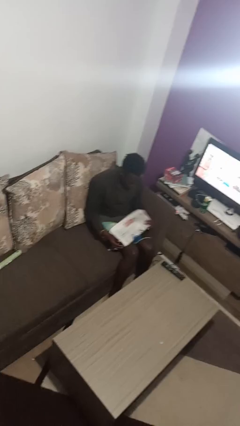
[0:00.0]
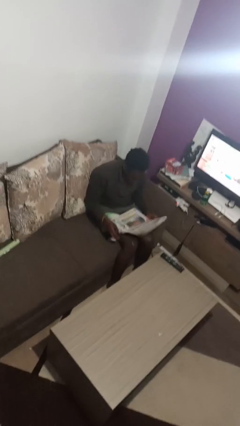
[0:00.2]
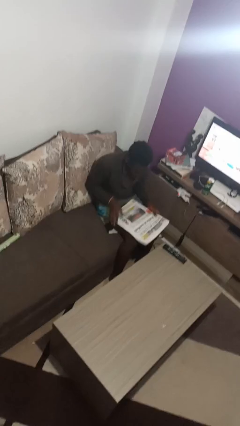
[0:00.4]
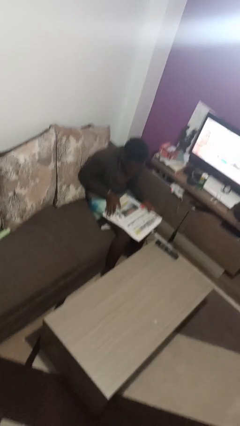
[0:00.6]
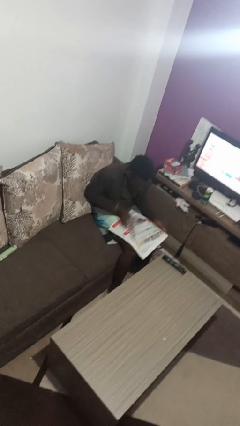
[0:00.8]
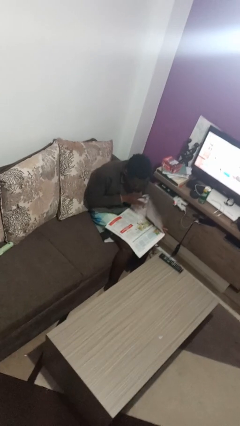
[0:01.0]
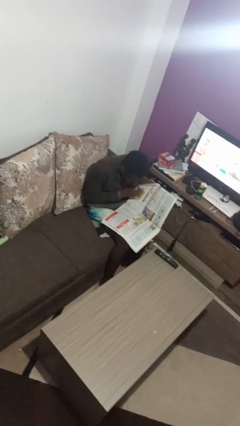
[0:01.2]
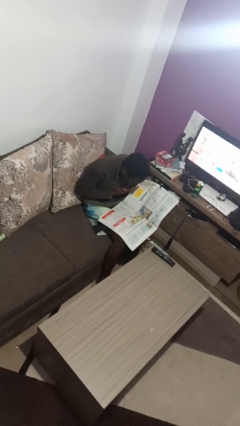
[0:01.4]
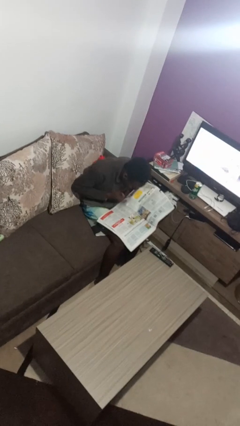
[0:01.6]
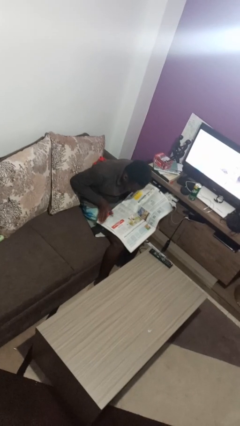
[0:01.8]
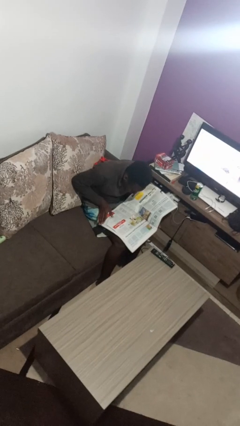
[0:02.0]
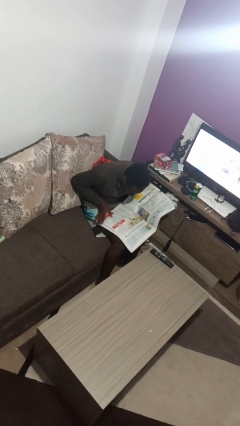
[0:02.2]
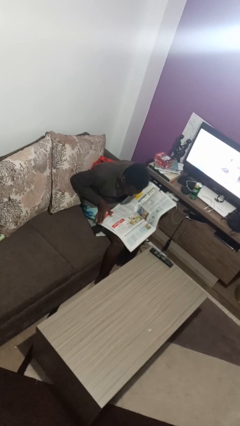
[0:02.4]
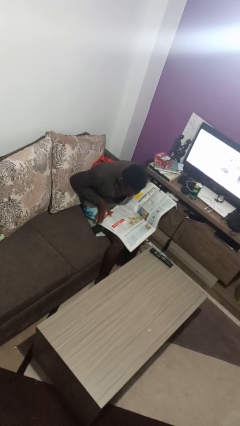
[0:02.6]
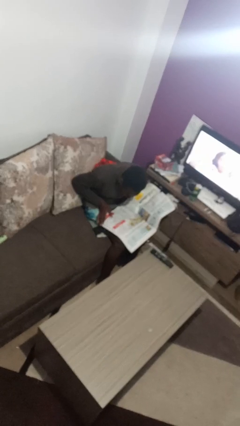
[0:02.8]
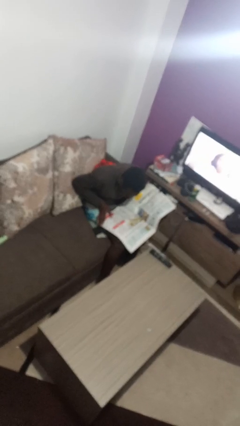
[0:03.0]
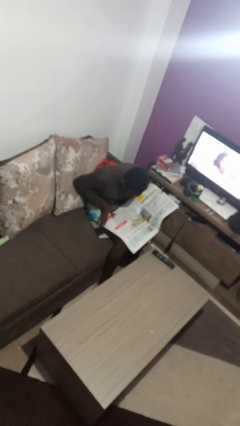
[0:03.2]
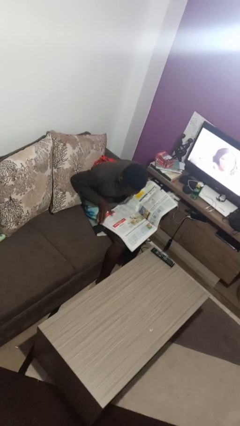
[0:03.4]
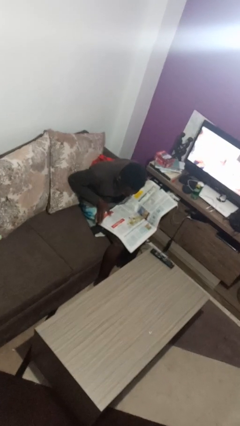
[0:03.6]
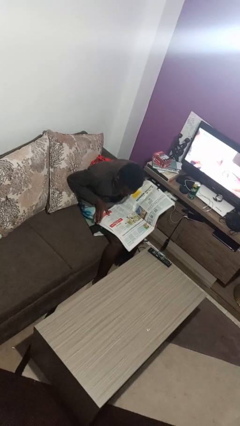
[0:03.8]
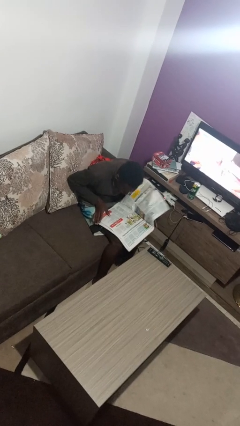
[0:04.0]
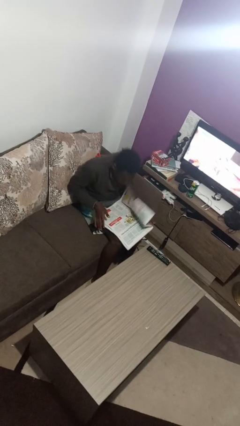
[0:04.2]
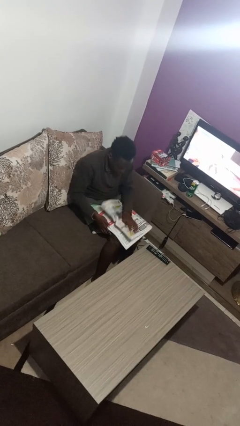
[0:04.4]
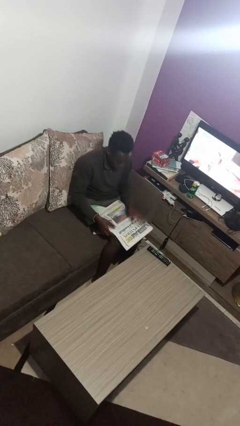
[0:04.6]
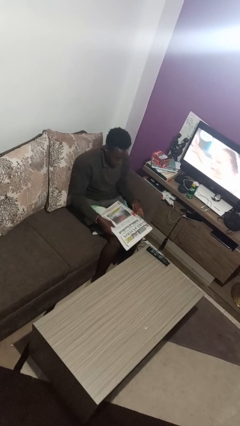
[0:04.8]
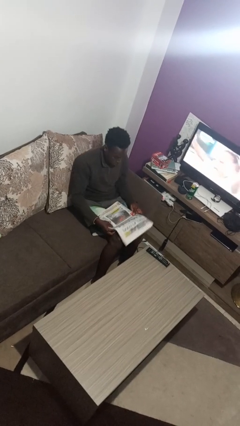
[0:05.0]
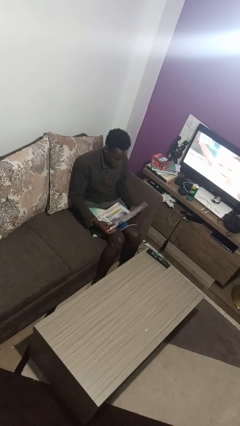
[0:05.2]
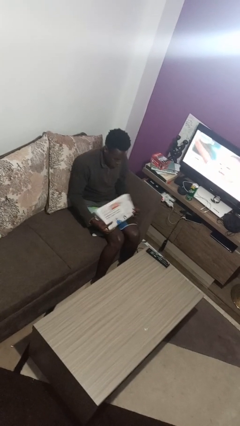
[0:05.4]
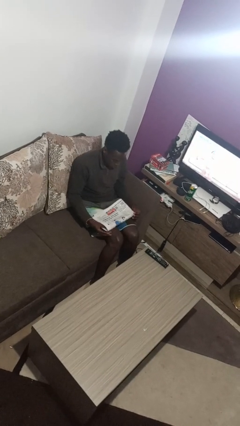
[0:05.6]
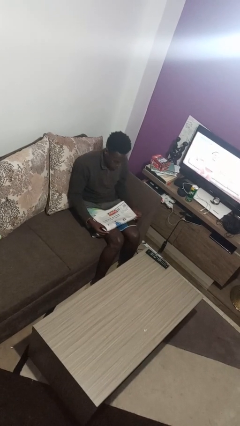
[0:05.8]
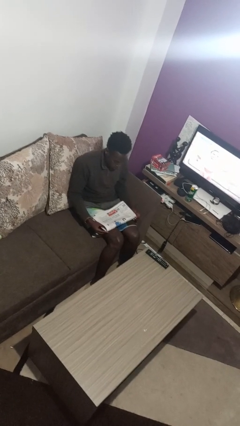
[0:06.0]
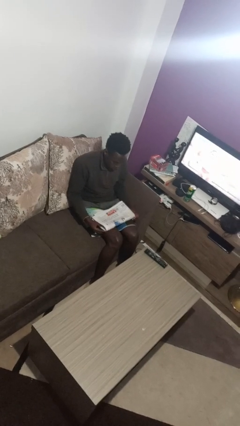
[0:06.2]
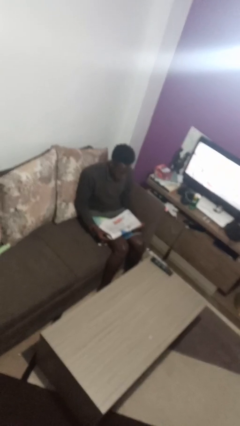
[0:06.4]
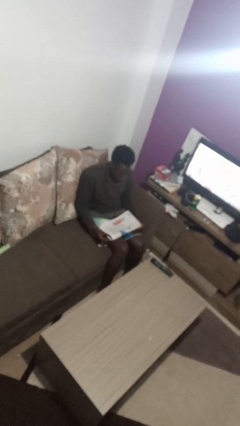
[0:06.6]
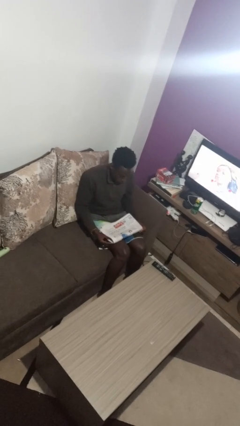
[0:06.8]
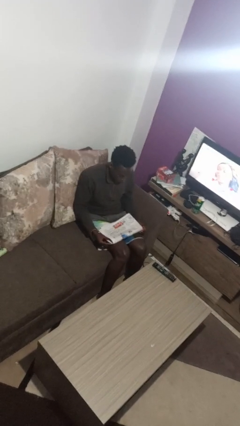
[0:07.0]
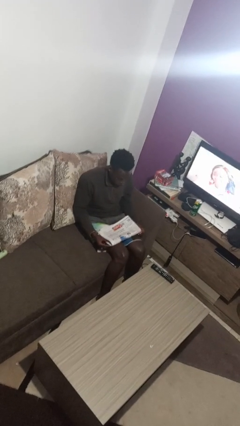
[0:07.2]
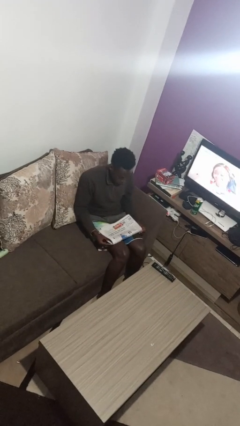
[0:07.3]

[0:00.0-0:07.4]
person reads newspaper

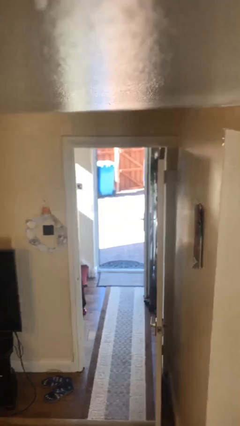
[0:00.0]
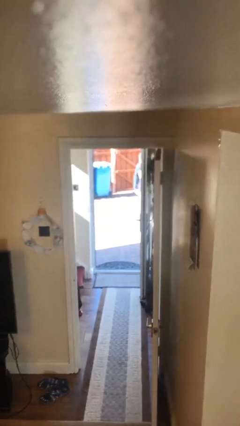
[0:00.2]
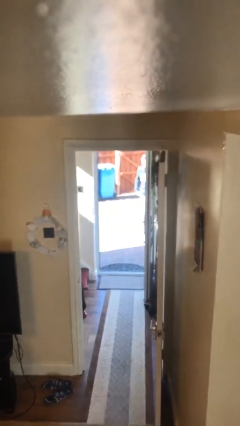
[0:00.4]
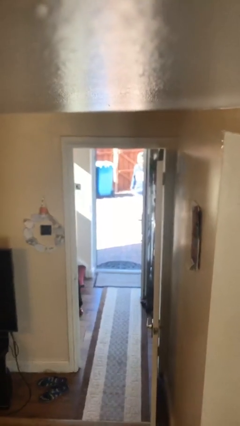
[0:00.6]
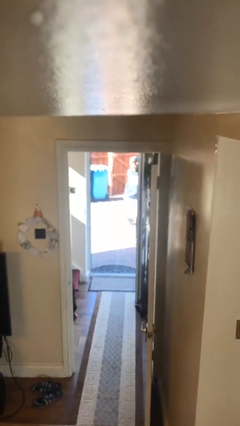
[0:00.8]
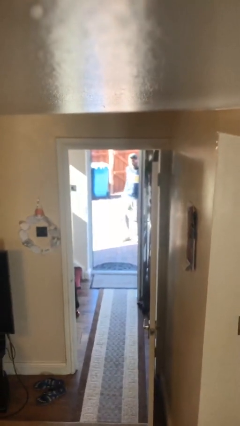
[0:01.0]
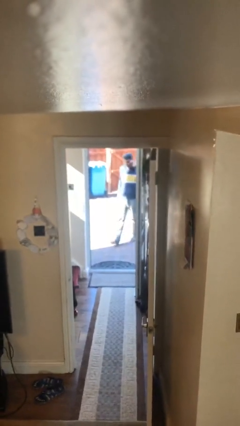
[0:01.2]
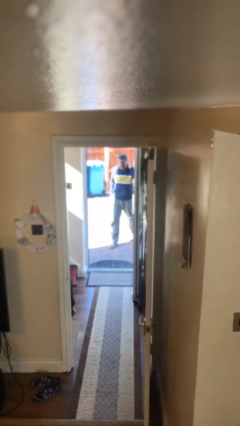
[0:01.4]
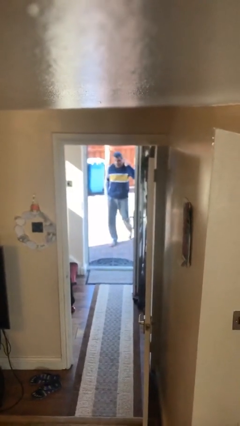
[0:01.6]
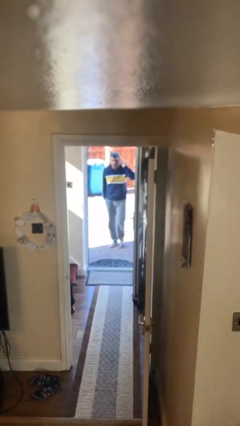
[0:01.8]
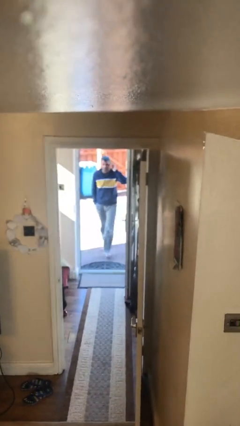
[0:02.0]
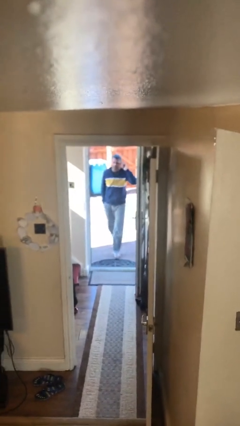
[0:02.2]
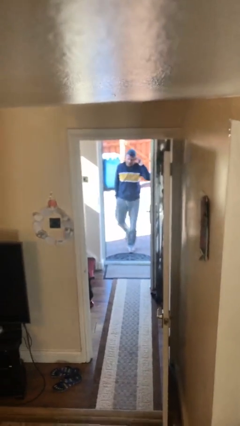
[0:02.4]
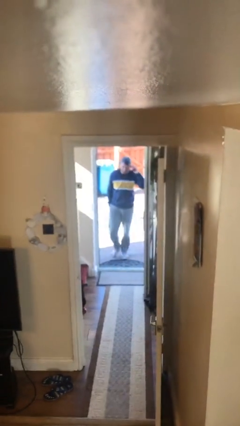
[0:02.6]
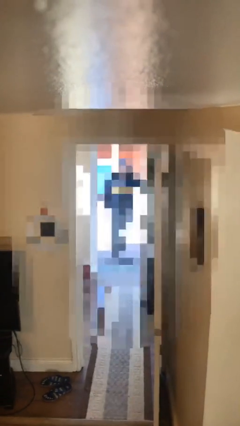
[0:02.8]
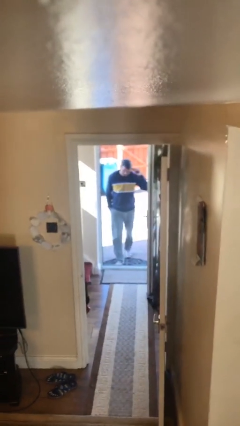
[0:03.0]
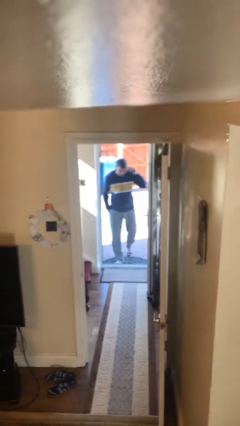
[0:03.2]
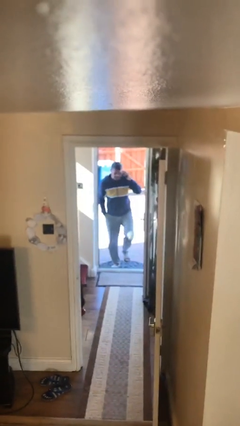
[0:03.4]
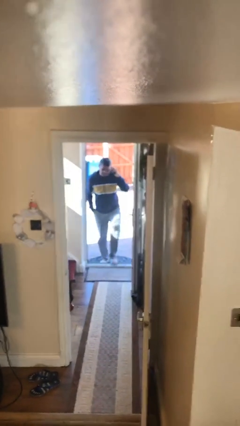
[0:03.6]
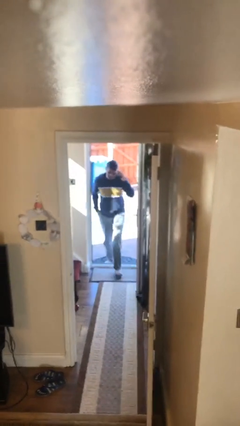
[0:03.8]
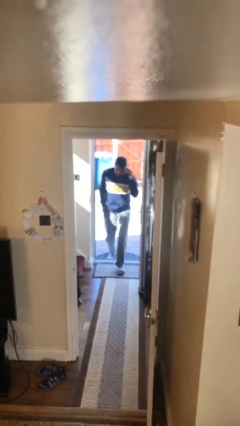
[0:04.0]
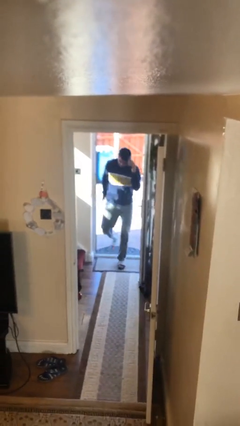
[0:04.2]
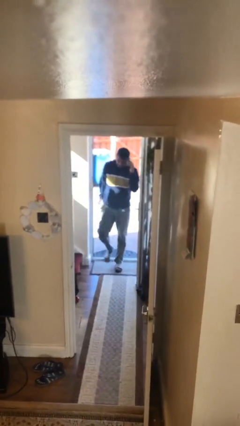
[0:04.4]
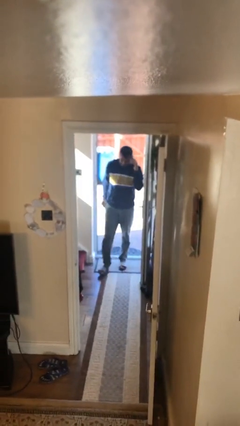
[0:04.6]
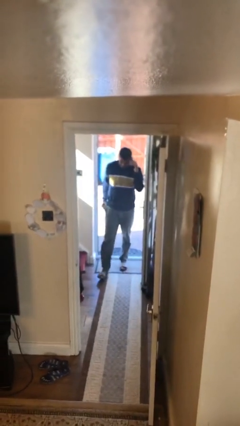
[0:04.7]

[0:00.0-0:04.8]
person enters scene through structure

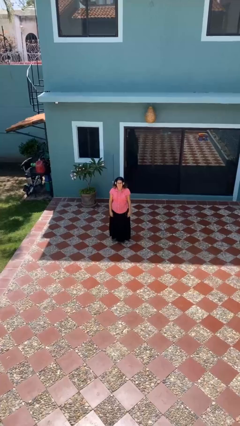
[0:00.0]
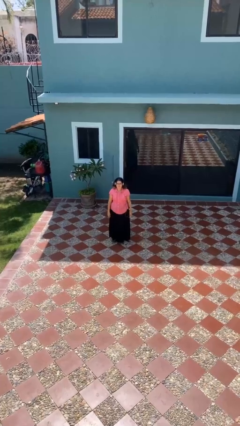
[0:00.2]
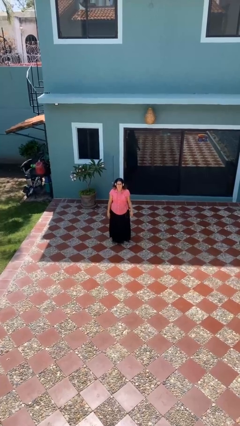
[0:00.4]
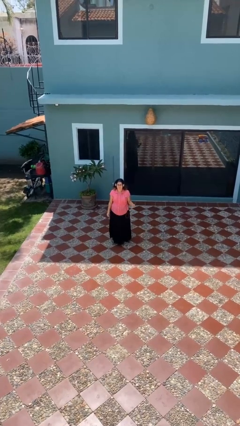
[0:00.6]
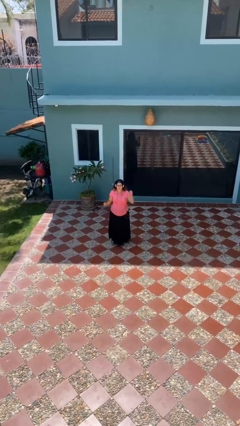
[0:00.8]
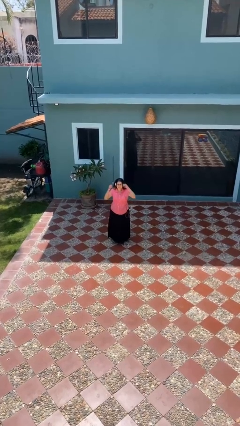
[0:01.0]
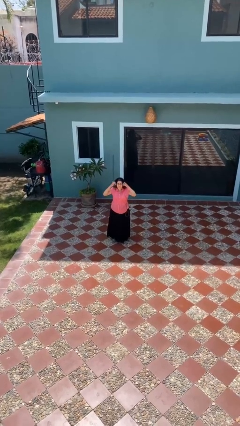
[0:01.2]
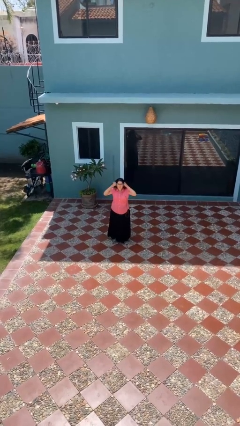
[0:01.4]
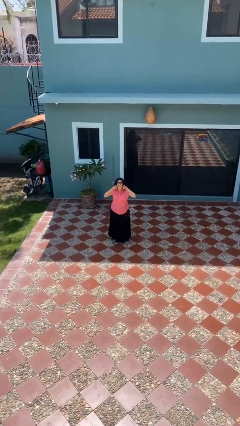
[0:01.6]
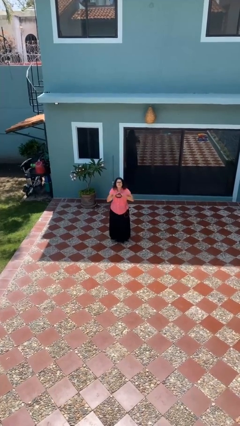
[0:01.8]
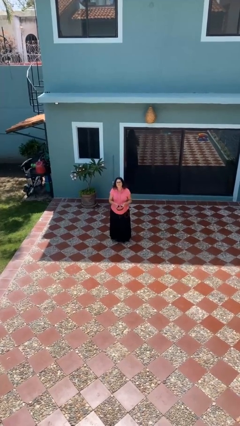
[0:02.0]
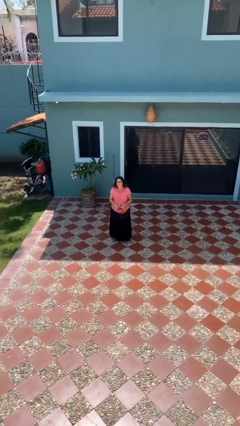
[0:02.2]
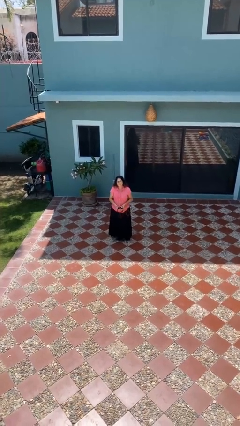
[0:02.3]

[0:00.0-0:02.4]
person takes off headphones

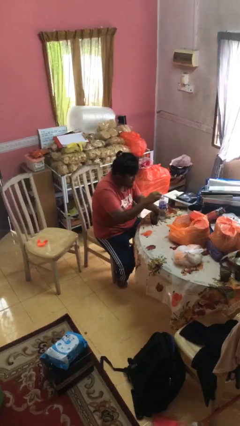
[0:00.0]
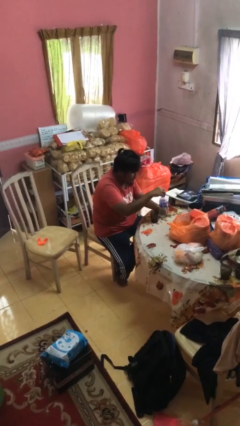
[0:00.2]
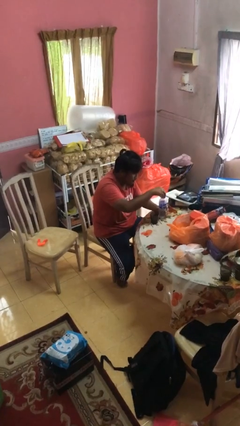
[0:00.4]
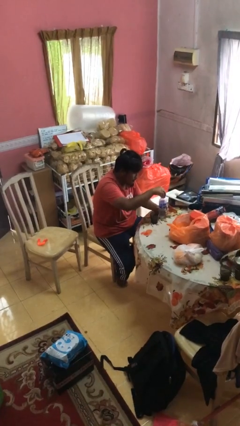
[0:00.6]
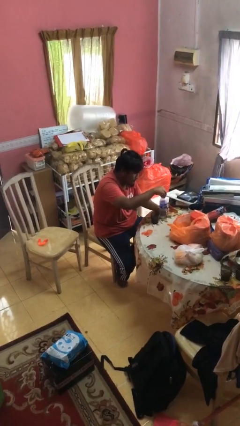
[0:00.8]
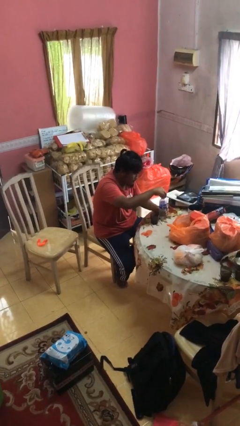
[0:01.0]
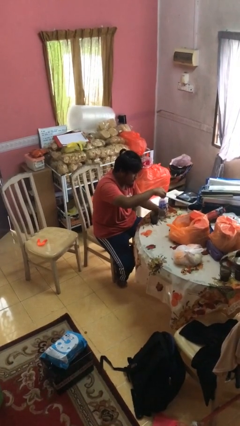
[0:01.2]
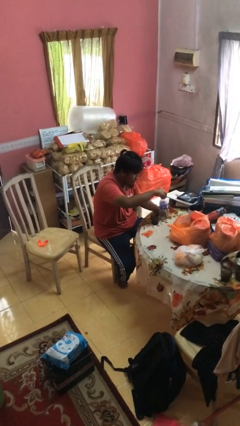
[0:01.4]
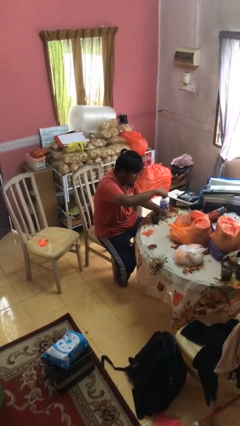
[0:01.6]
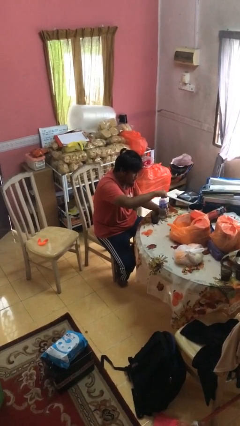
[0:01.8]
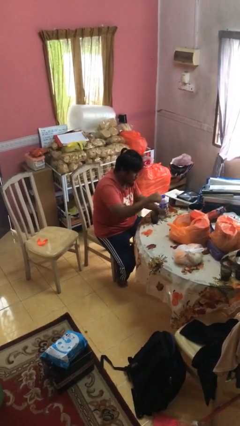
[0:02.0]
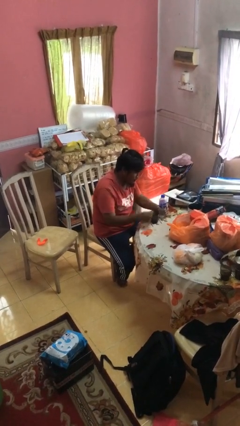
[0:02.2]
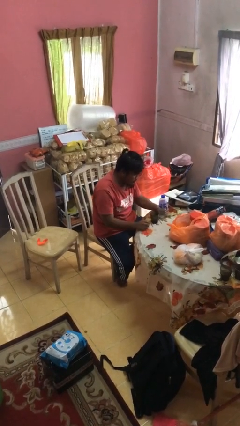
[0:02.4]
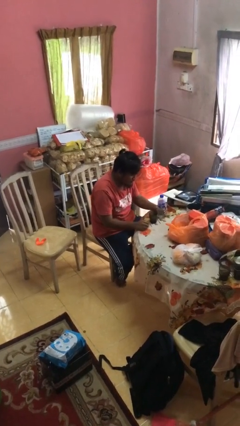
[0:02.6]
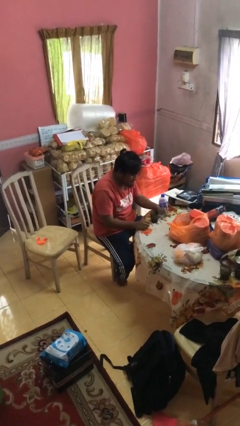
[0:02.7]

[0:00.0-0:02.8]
person screws lid to bottle

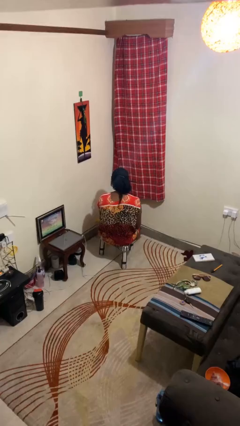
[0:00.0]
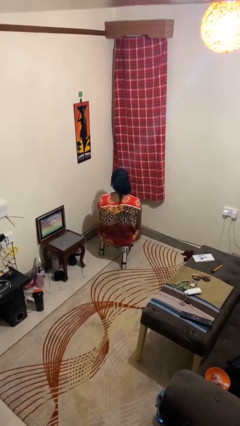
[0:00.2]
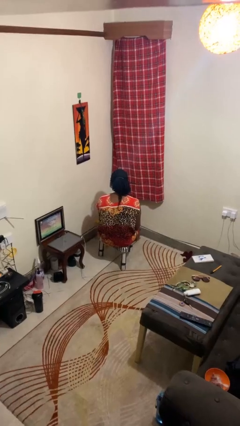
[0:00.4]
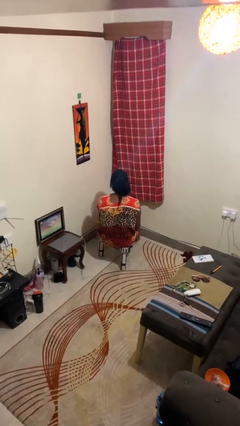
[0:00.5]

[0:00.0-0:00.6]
person brushes hair
